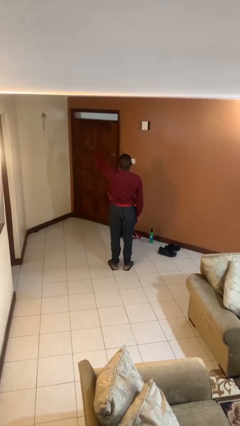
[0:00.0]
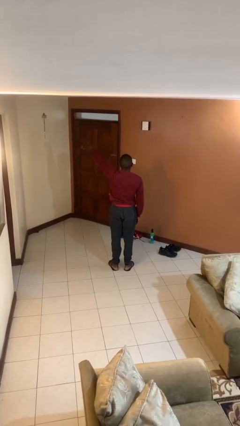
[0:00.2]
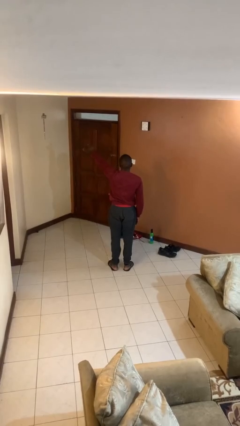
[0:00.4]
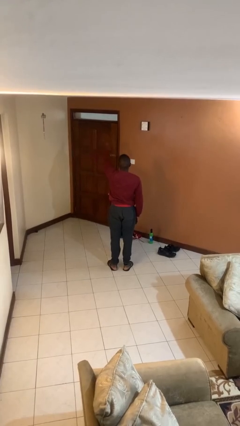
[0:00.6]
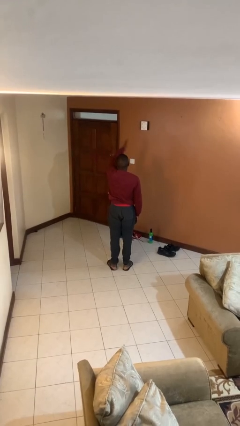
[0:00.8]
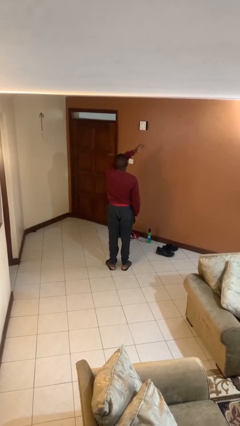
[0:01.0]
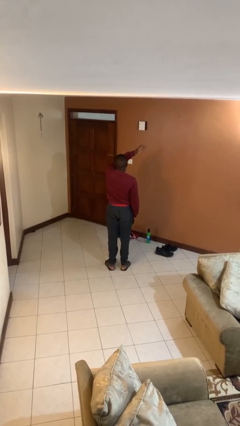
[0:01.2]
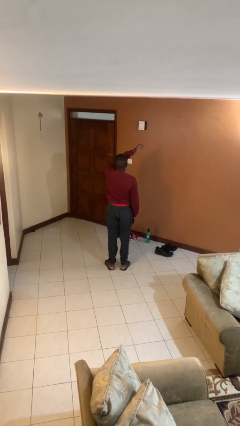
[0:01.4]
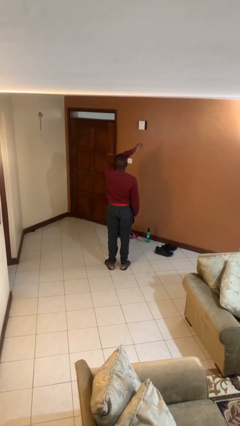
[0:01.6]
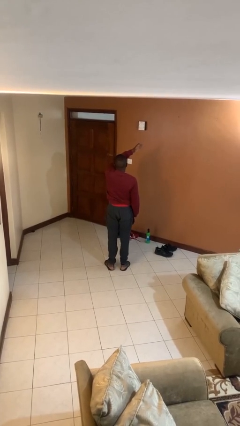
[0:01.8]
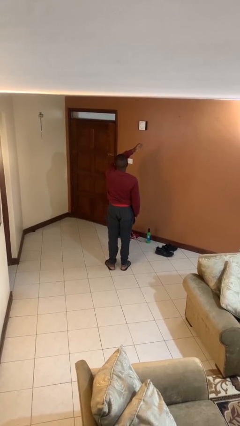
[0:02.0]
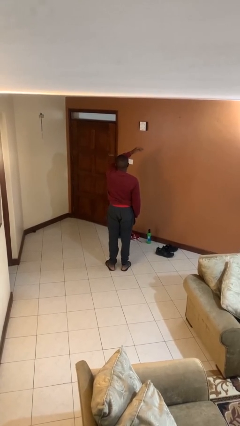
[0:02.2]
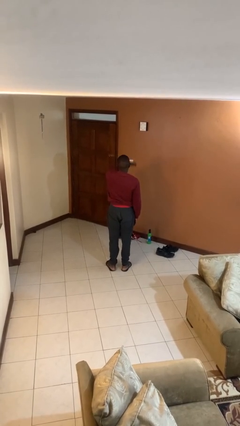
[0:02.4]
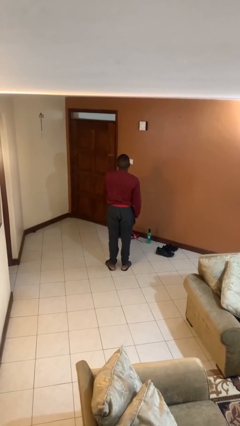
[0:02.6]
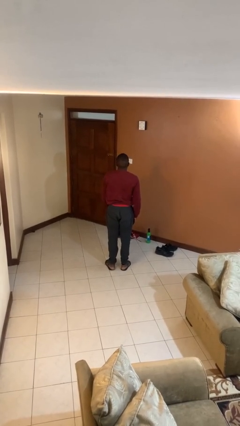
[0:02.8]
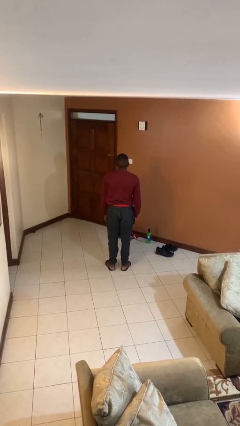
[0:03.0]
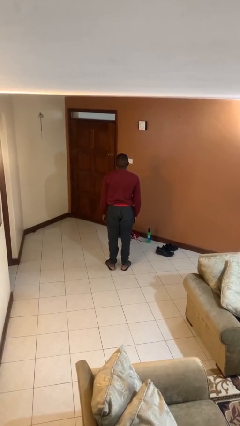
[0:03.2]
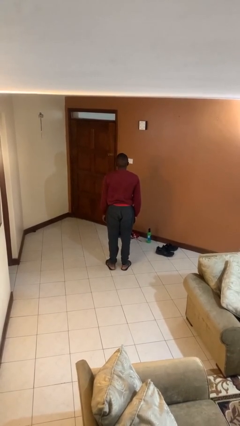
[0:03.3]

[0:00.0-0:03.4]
person gestures swipe right

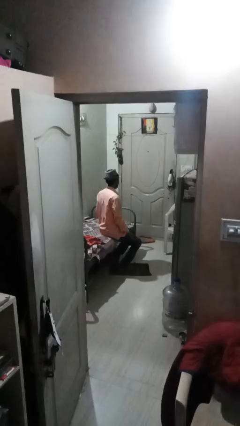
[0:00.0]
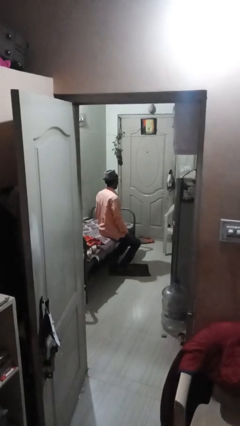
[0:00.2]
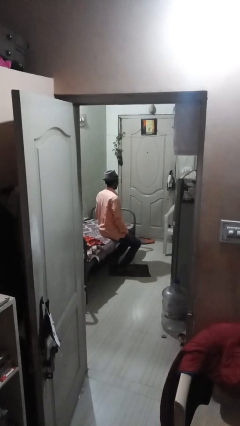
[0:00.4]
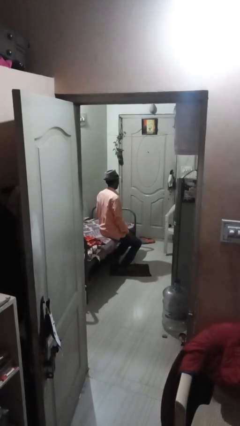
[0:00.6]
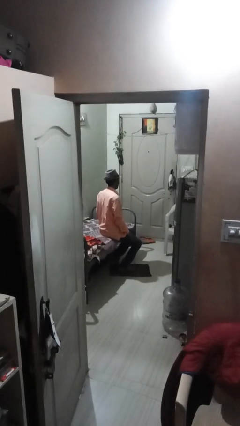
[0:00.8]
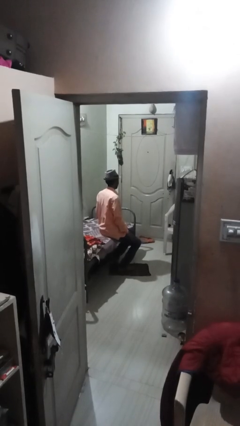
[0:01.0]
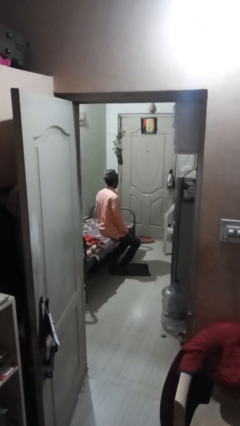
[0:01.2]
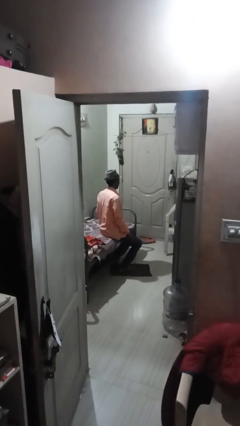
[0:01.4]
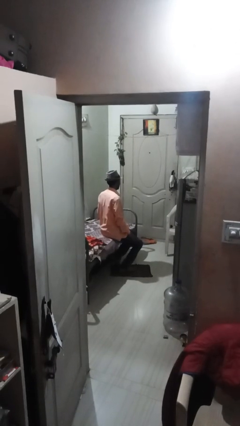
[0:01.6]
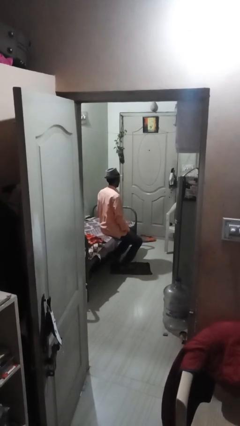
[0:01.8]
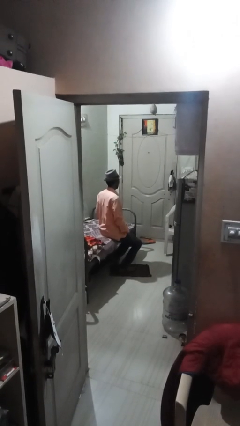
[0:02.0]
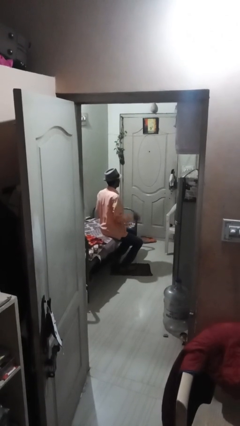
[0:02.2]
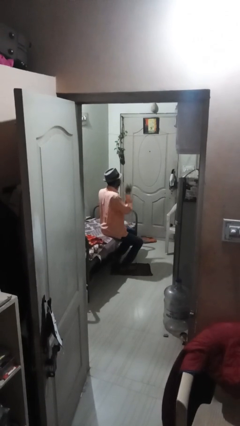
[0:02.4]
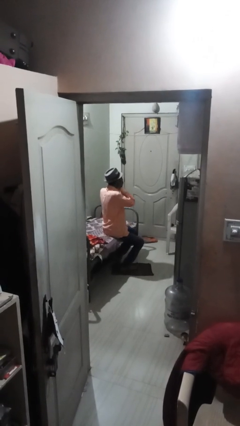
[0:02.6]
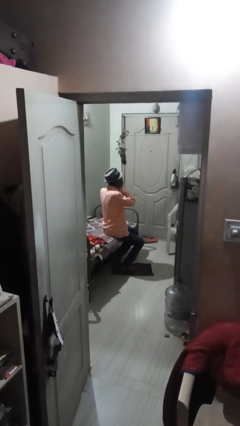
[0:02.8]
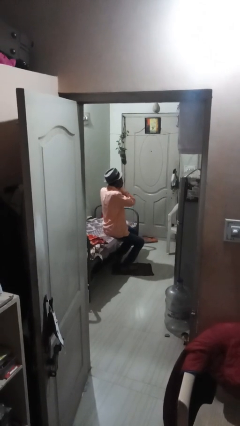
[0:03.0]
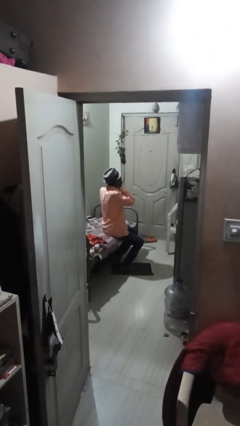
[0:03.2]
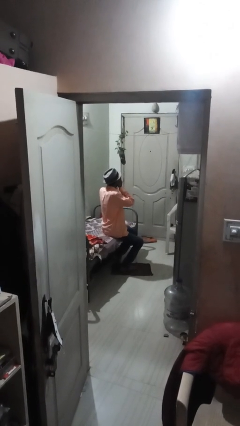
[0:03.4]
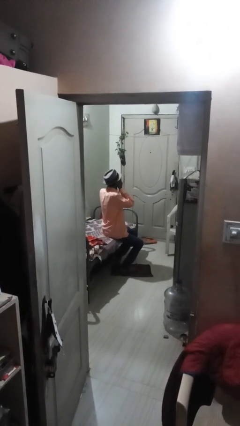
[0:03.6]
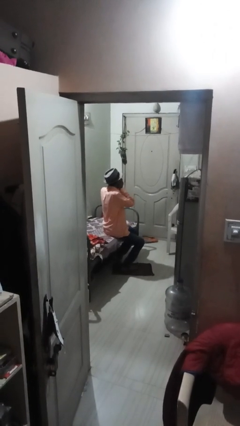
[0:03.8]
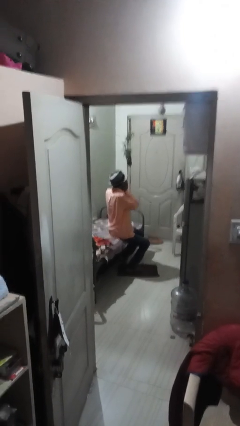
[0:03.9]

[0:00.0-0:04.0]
person covers face with hands

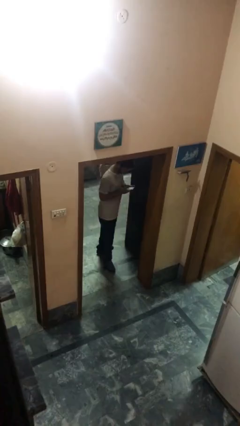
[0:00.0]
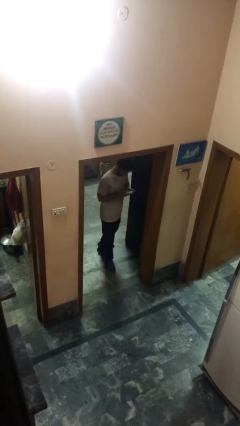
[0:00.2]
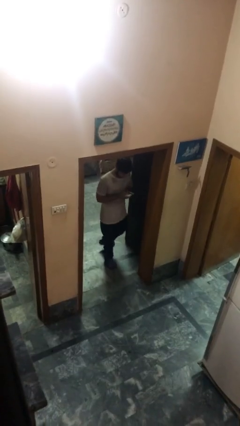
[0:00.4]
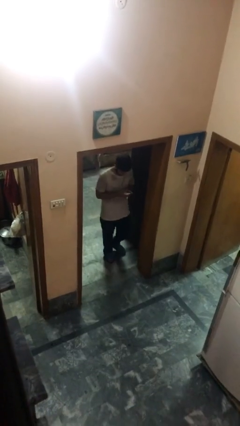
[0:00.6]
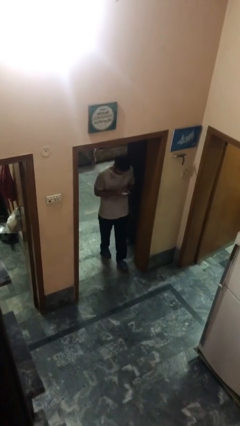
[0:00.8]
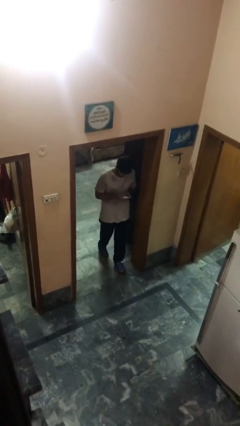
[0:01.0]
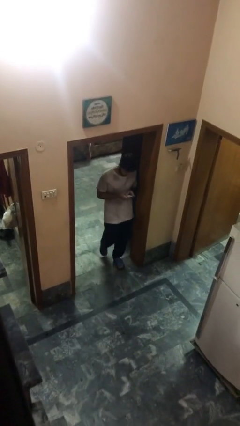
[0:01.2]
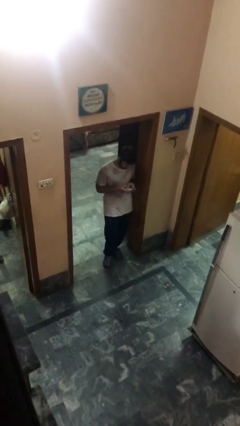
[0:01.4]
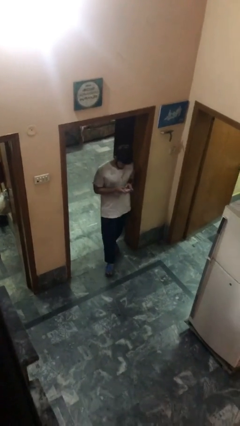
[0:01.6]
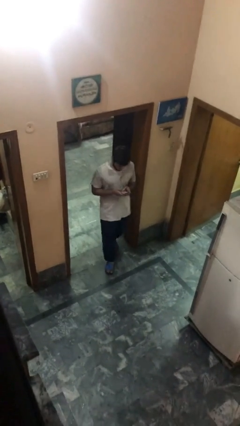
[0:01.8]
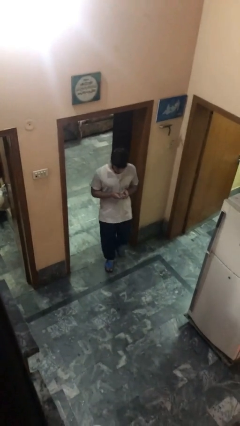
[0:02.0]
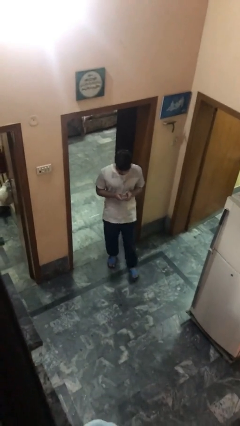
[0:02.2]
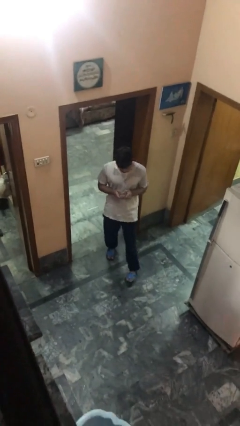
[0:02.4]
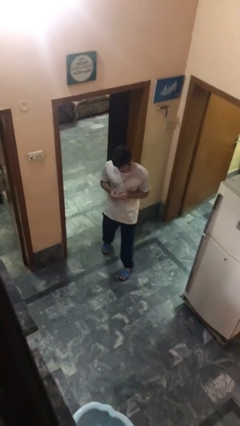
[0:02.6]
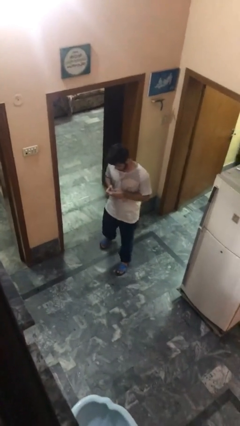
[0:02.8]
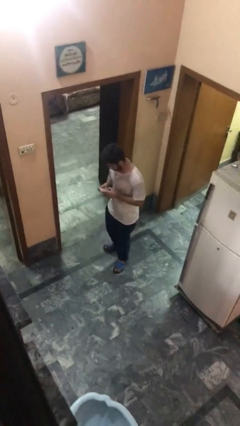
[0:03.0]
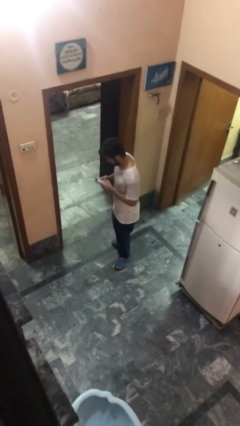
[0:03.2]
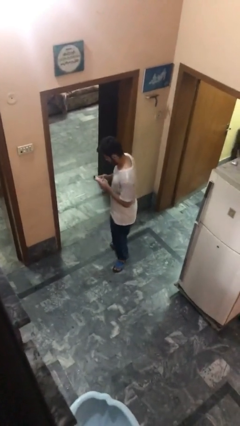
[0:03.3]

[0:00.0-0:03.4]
person enters scene through structure

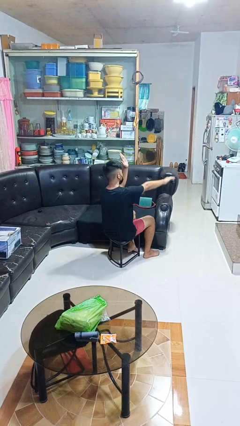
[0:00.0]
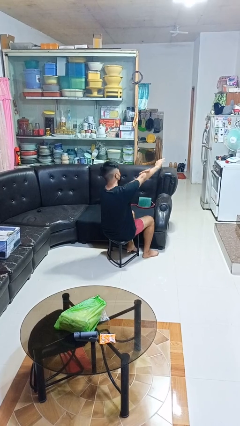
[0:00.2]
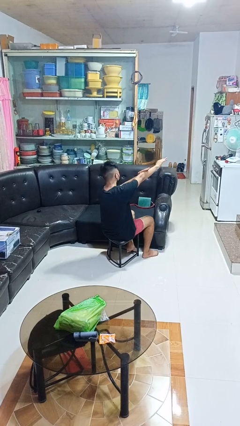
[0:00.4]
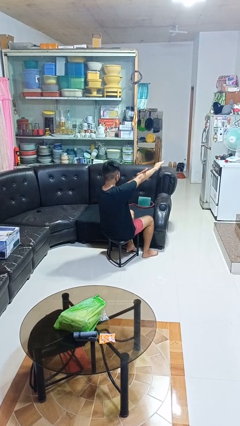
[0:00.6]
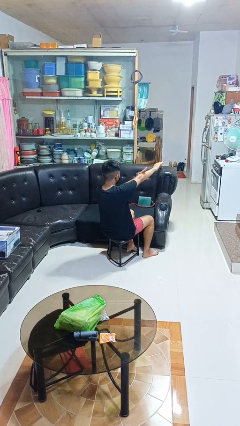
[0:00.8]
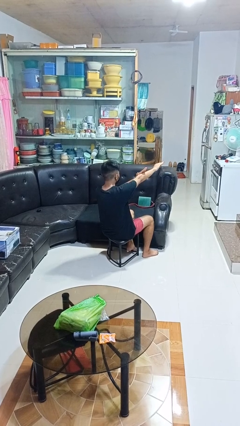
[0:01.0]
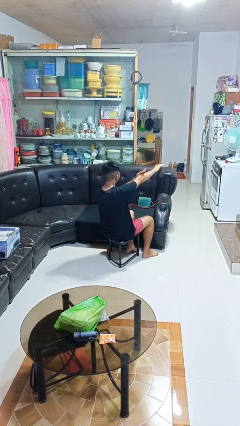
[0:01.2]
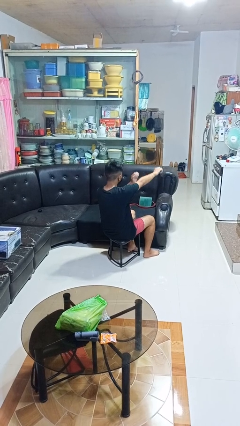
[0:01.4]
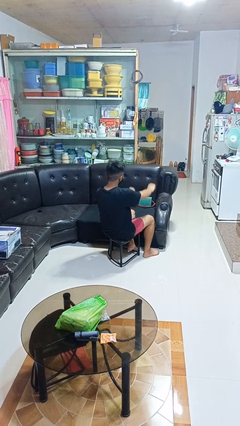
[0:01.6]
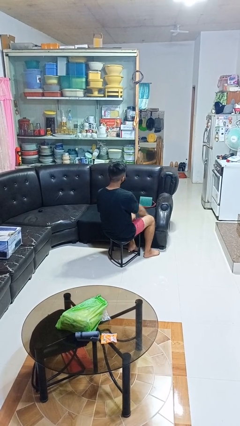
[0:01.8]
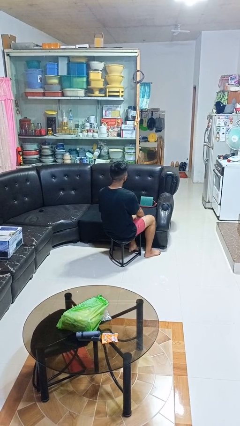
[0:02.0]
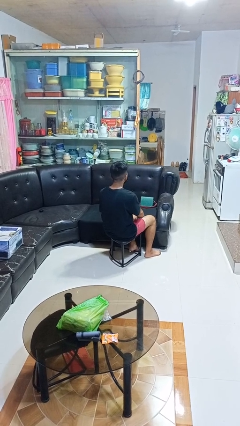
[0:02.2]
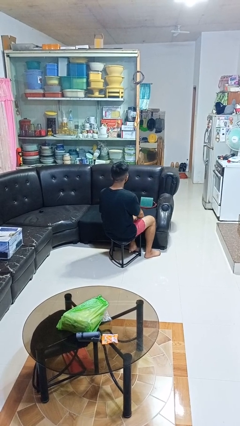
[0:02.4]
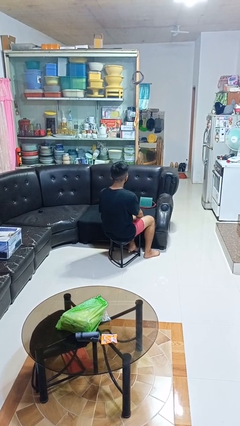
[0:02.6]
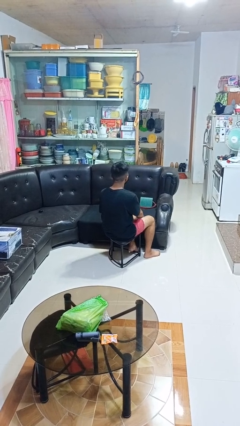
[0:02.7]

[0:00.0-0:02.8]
person swats bug

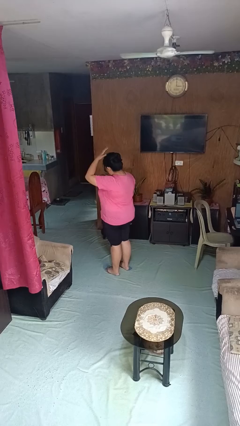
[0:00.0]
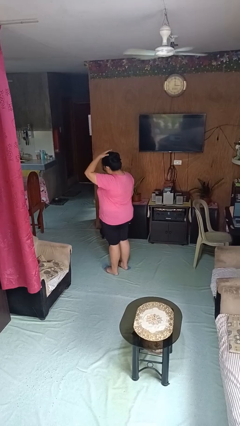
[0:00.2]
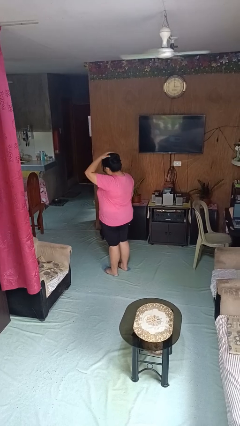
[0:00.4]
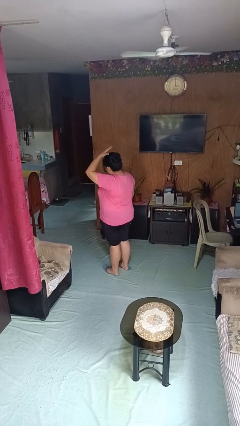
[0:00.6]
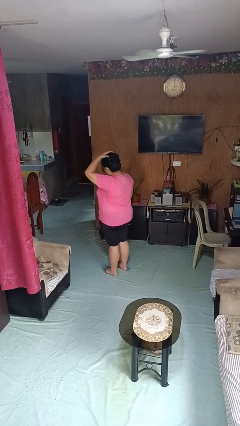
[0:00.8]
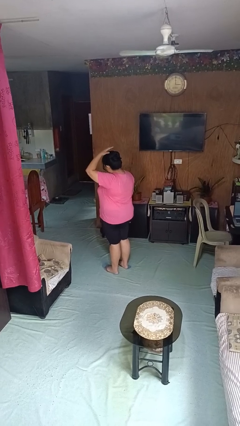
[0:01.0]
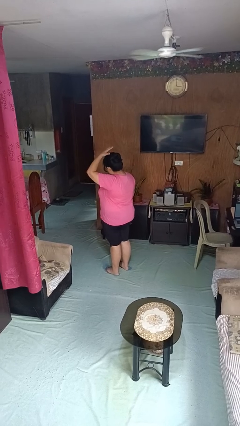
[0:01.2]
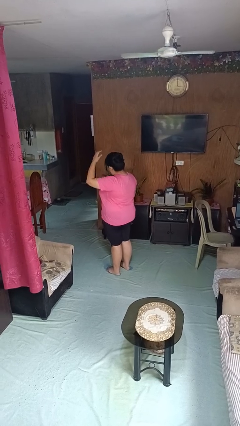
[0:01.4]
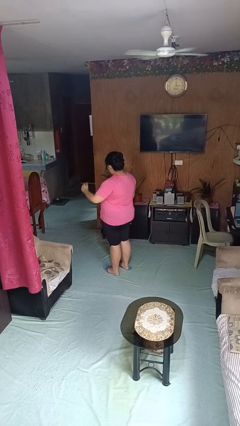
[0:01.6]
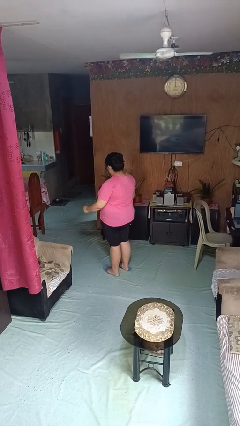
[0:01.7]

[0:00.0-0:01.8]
person pats head

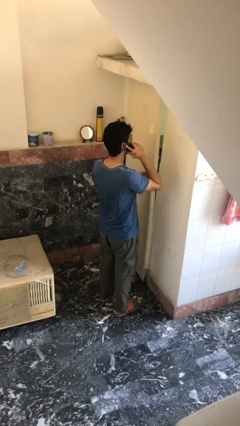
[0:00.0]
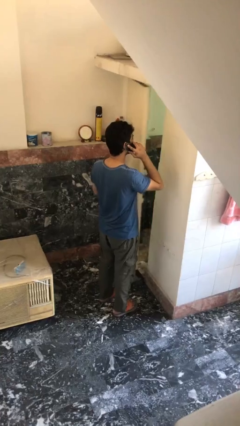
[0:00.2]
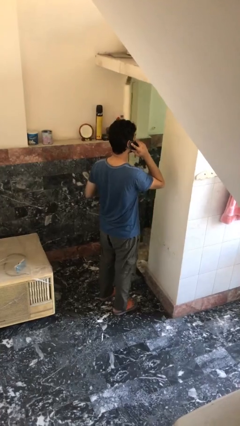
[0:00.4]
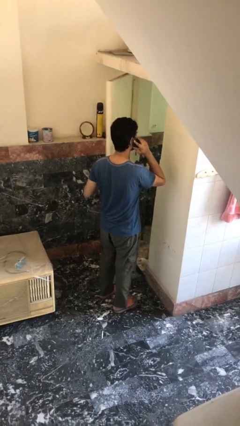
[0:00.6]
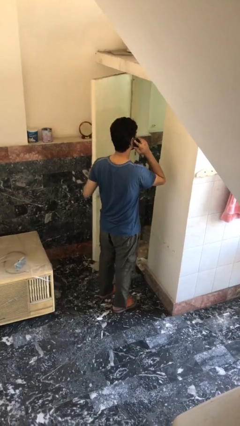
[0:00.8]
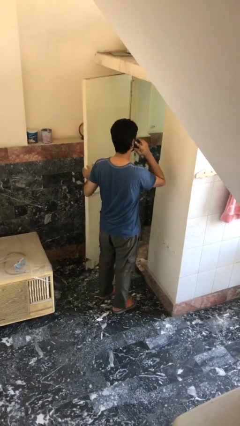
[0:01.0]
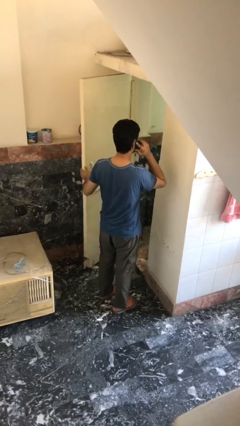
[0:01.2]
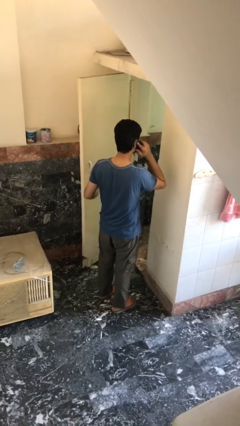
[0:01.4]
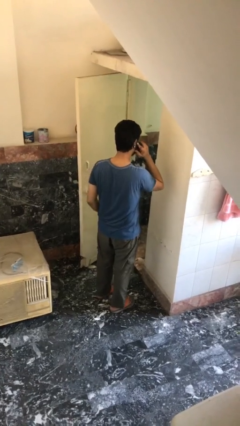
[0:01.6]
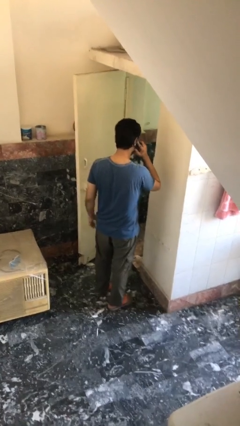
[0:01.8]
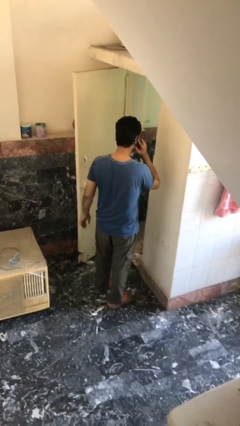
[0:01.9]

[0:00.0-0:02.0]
person opens facility door

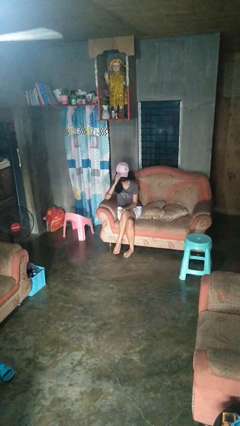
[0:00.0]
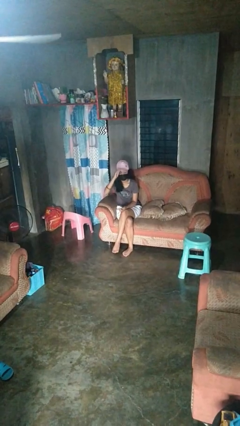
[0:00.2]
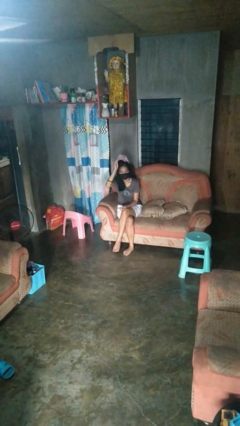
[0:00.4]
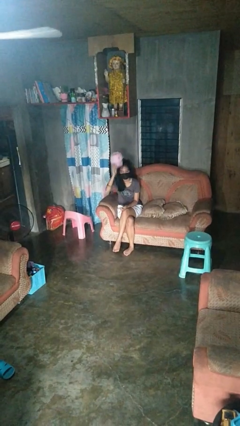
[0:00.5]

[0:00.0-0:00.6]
person takes off hat
